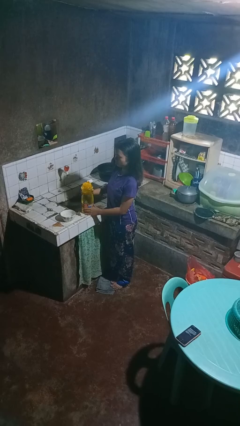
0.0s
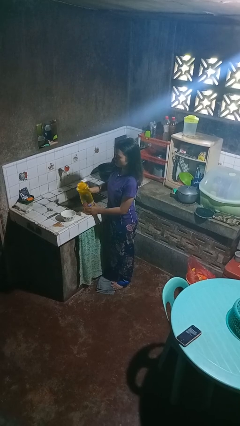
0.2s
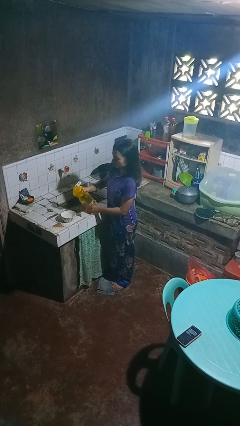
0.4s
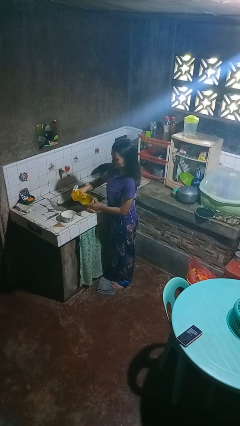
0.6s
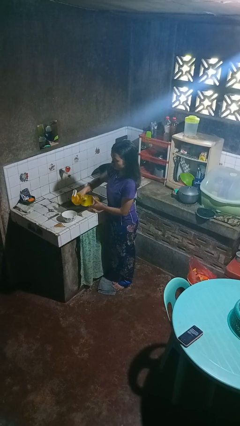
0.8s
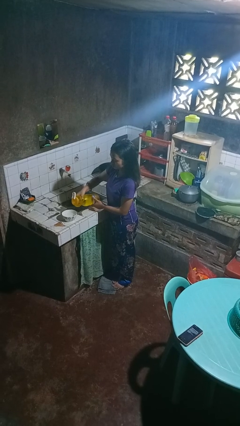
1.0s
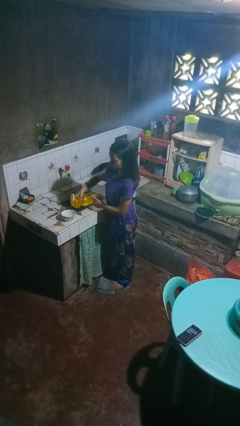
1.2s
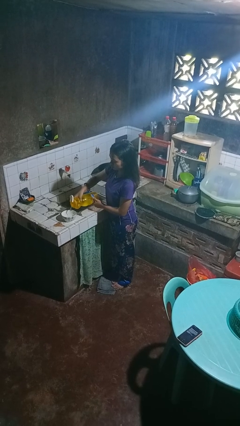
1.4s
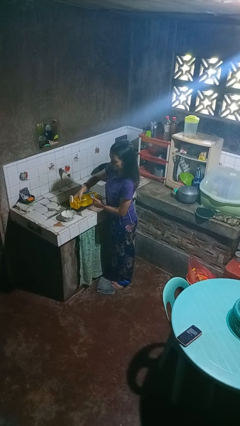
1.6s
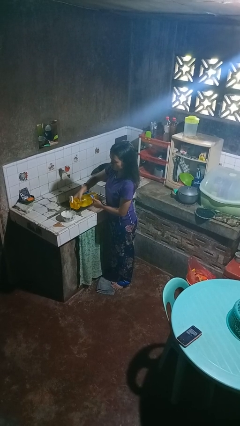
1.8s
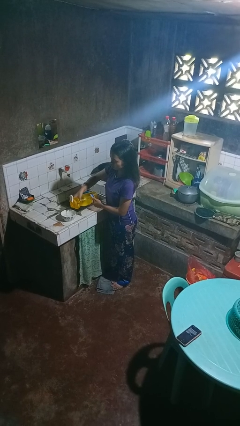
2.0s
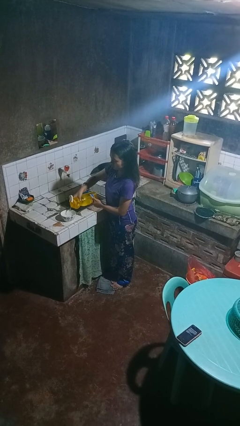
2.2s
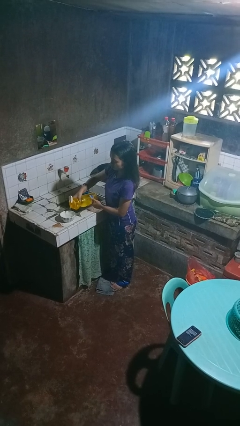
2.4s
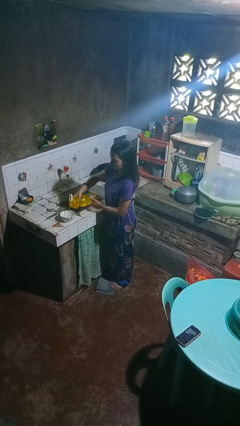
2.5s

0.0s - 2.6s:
person pours into bowl

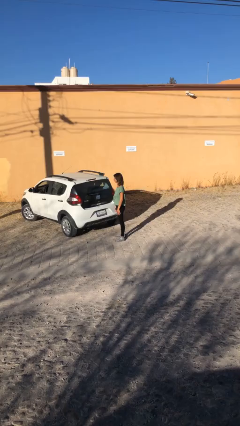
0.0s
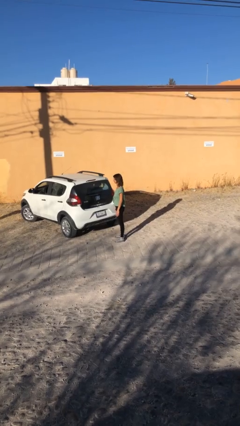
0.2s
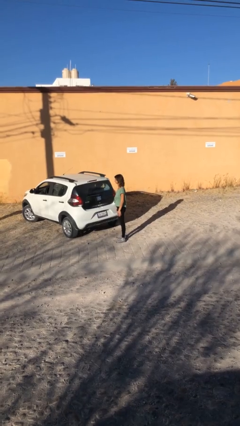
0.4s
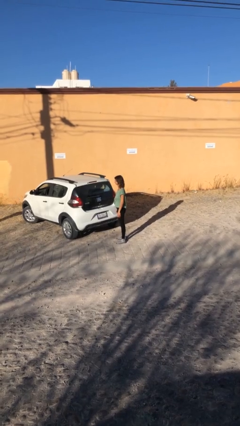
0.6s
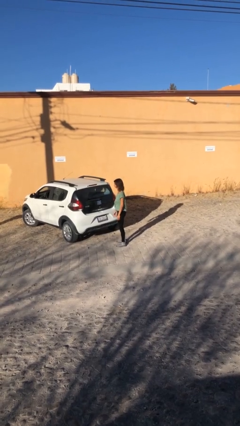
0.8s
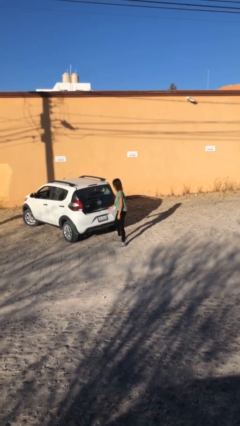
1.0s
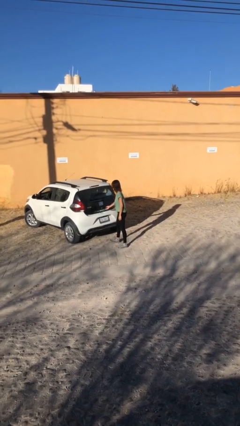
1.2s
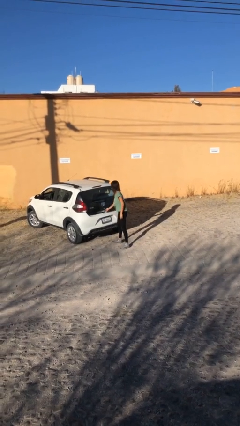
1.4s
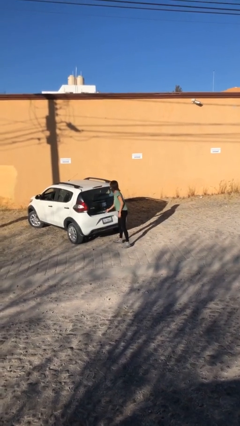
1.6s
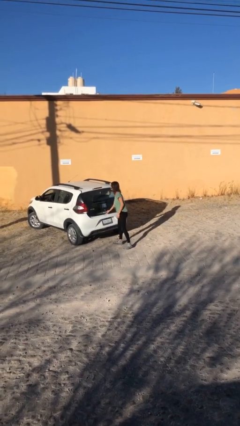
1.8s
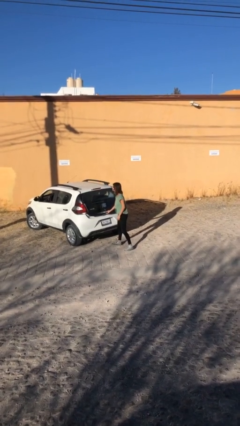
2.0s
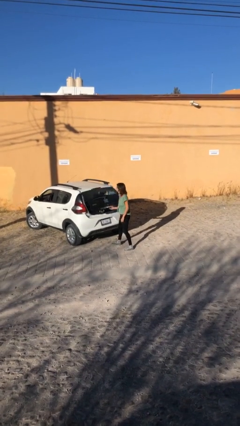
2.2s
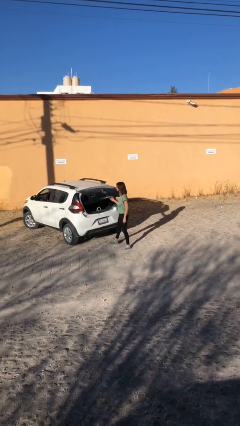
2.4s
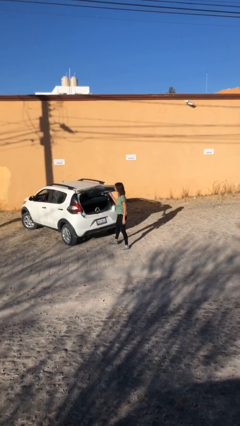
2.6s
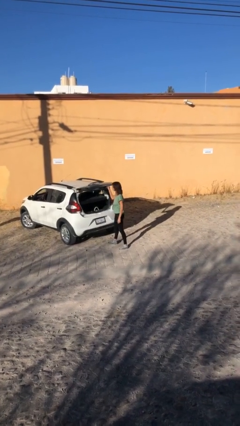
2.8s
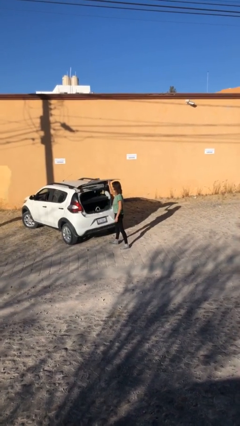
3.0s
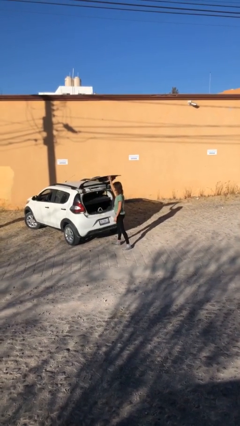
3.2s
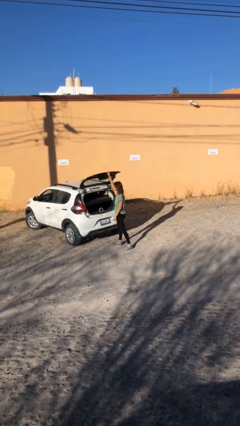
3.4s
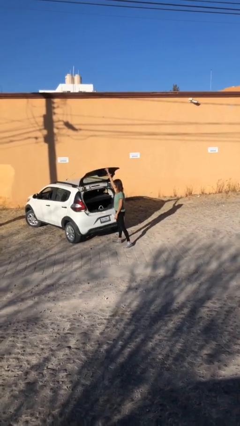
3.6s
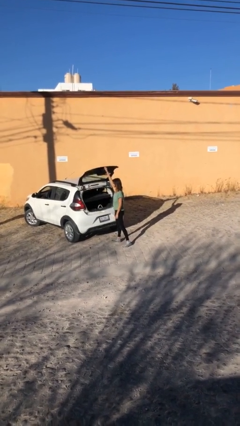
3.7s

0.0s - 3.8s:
person opens car trunk

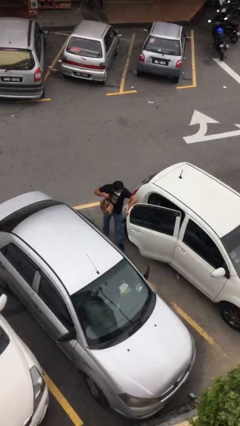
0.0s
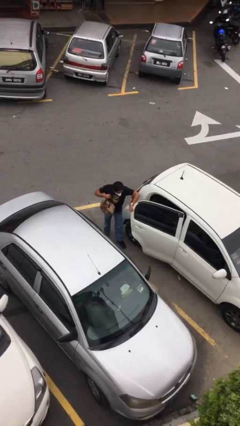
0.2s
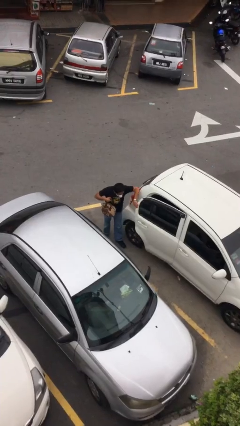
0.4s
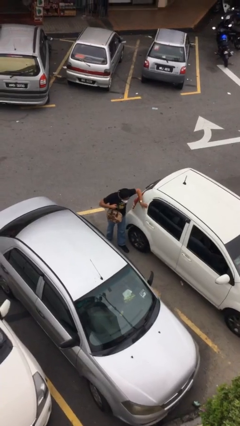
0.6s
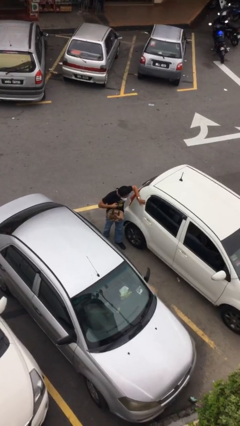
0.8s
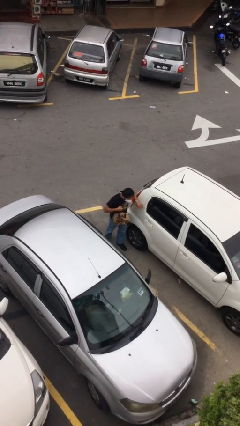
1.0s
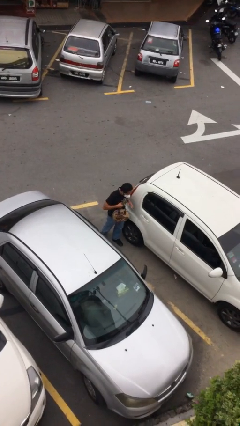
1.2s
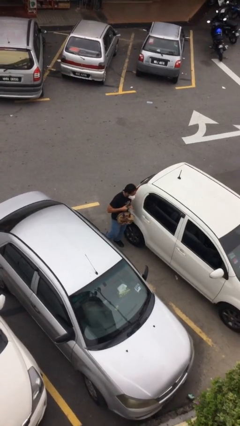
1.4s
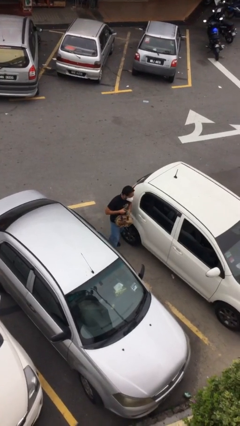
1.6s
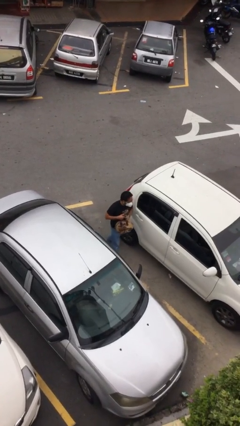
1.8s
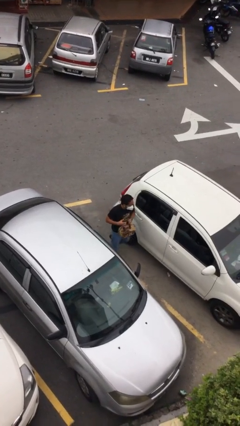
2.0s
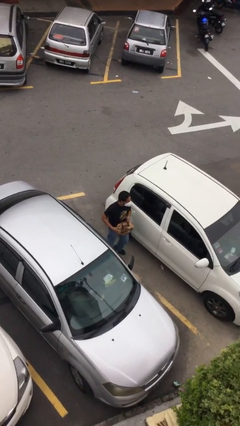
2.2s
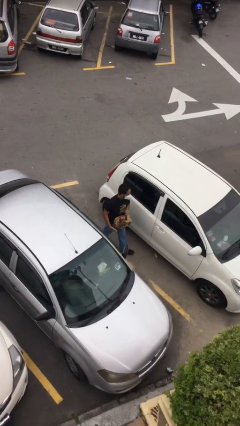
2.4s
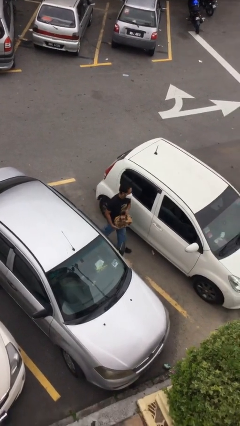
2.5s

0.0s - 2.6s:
person closes car door

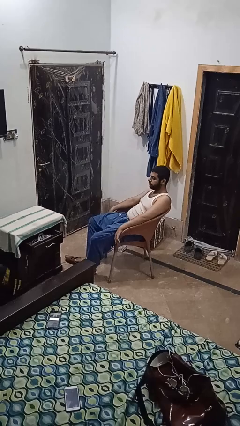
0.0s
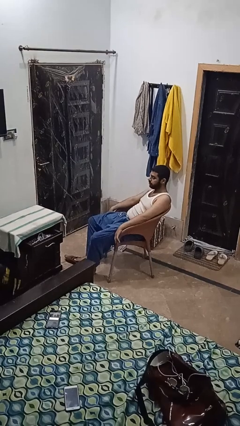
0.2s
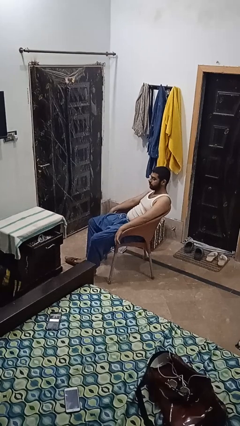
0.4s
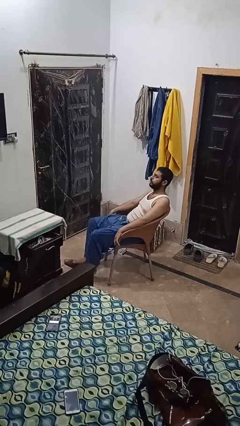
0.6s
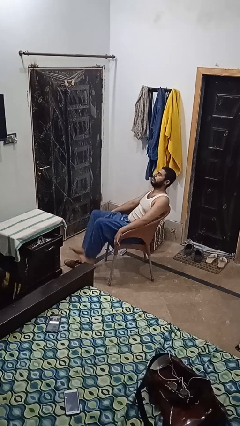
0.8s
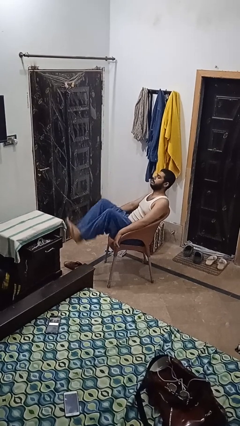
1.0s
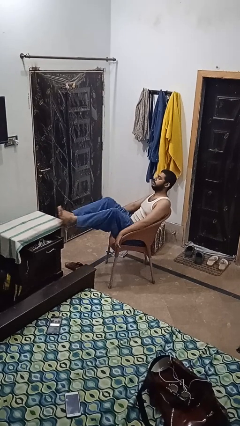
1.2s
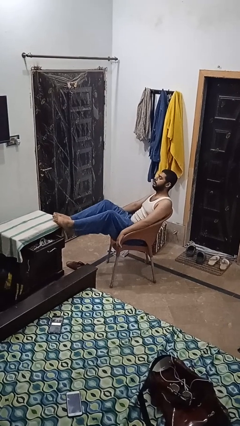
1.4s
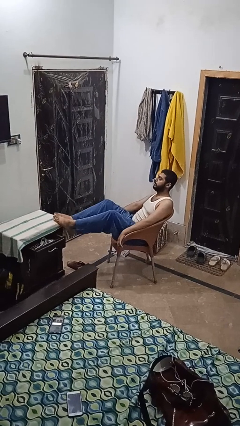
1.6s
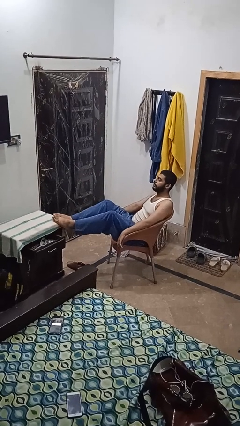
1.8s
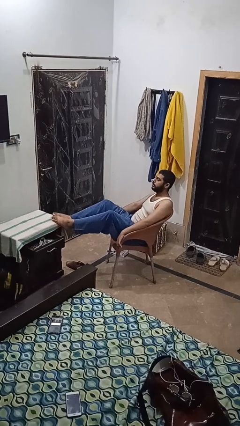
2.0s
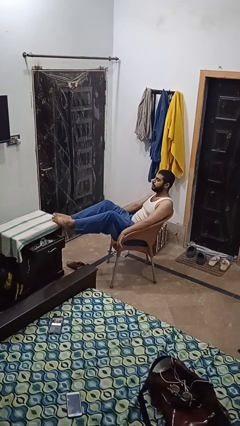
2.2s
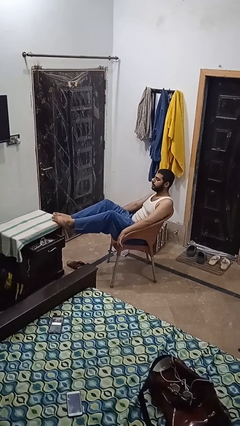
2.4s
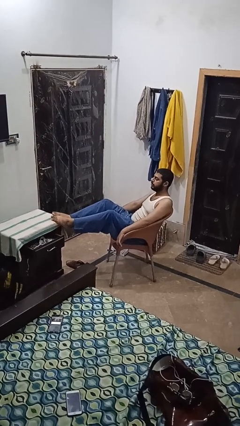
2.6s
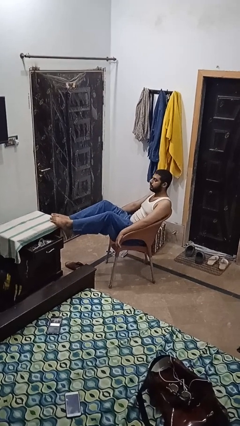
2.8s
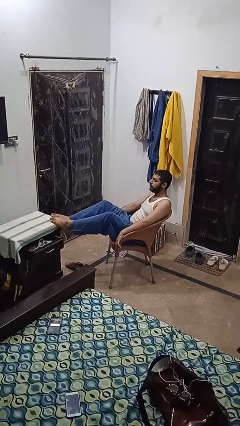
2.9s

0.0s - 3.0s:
person puts feet up

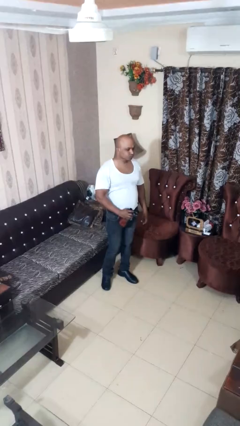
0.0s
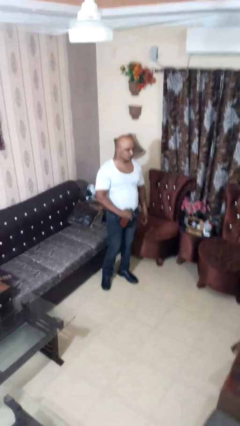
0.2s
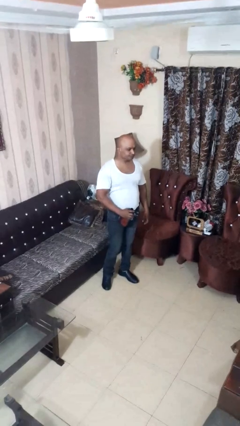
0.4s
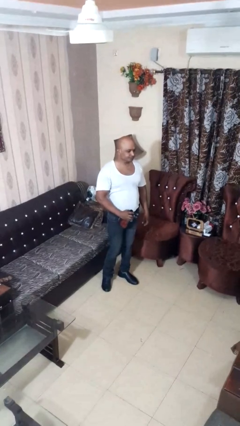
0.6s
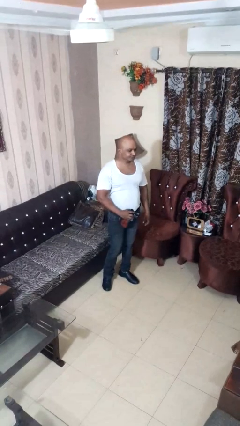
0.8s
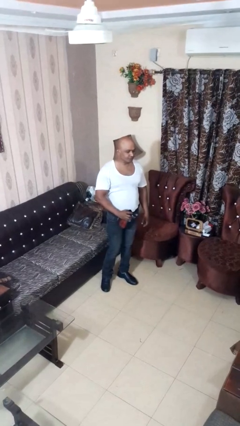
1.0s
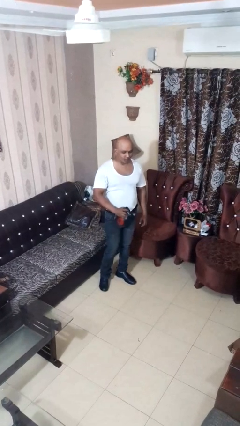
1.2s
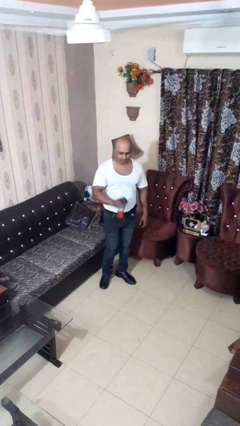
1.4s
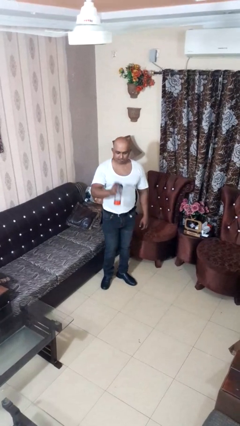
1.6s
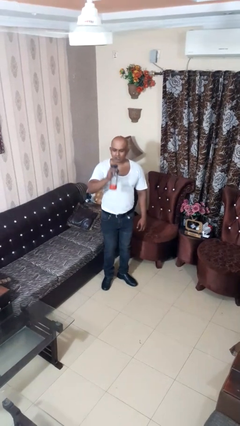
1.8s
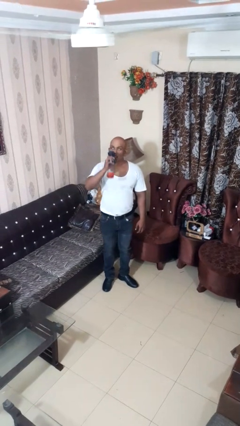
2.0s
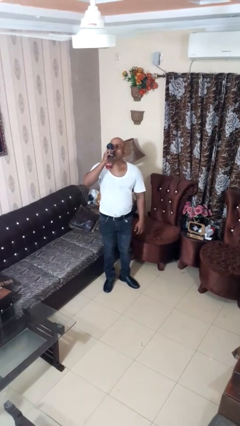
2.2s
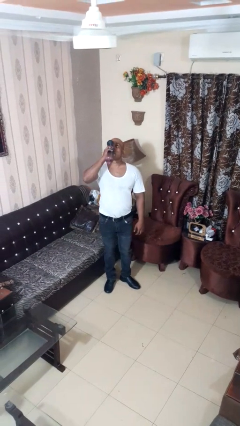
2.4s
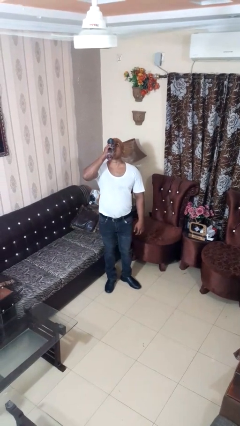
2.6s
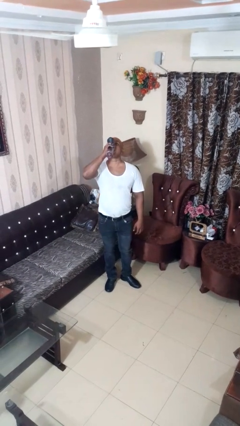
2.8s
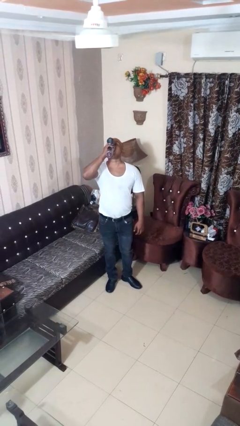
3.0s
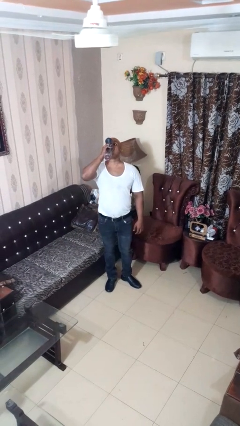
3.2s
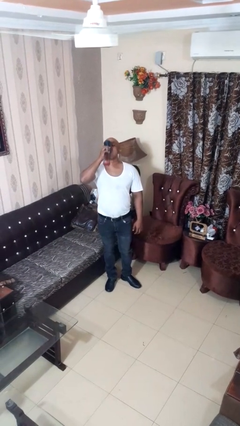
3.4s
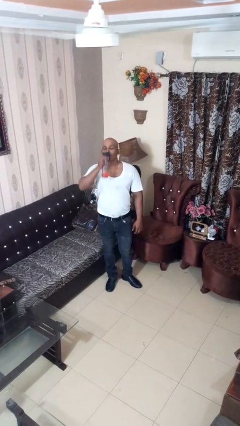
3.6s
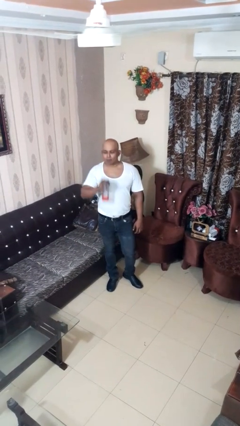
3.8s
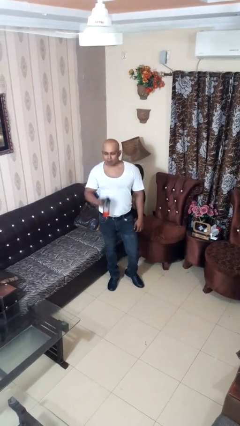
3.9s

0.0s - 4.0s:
person drinks from bottle

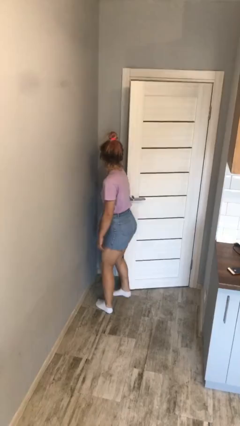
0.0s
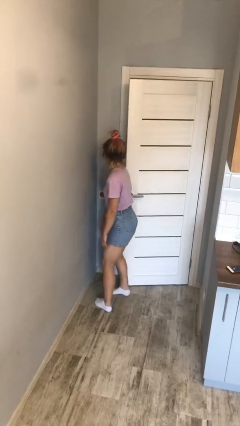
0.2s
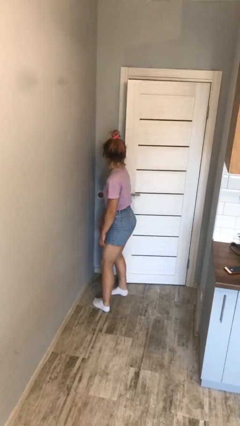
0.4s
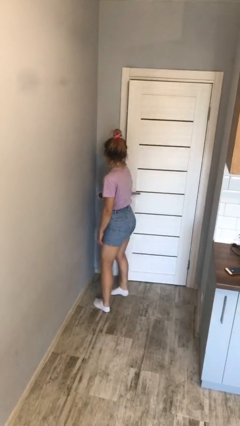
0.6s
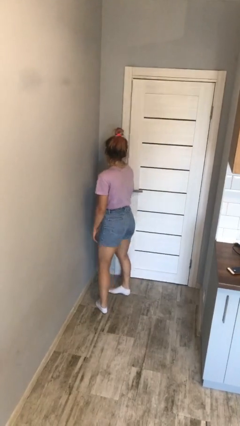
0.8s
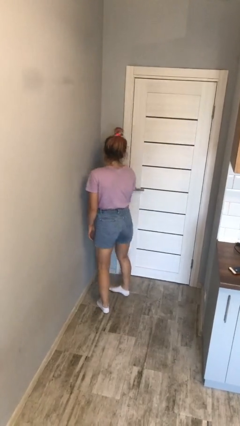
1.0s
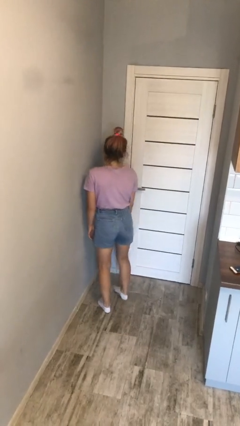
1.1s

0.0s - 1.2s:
person closes door with hip
